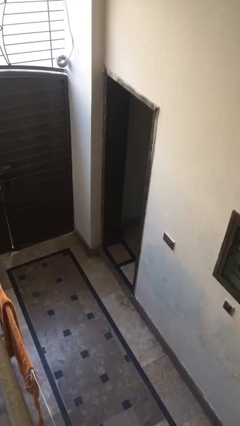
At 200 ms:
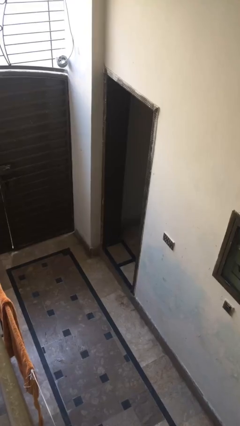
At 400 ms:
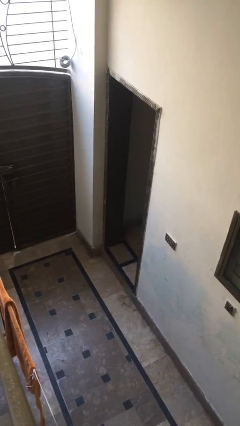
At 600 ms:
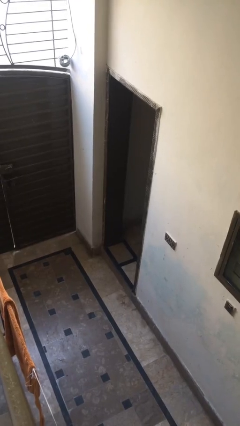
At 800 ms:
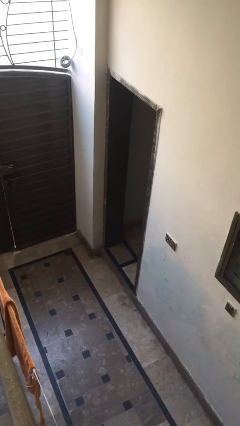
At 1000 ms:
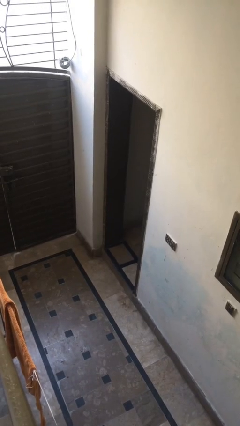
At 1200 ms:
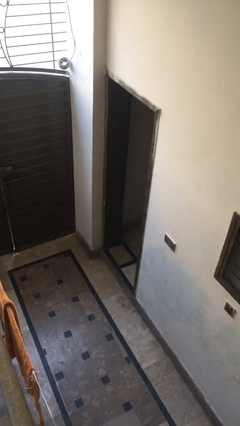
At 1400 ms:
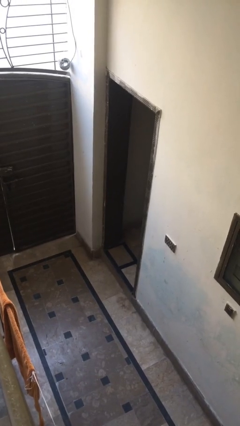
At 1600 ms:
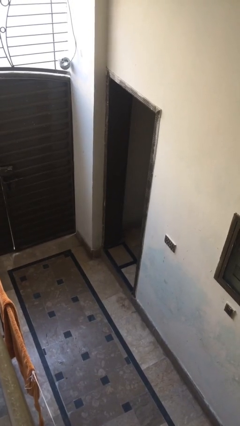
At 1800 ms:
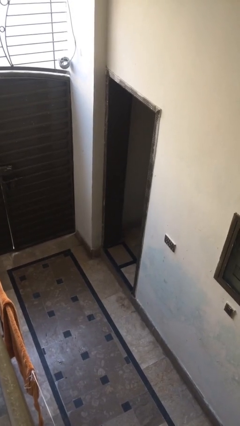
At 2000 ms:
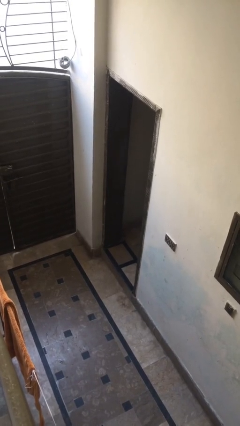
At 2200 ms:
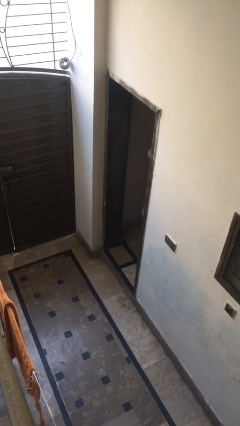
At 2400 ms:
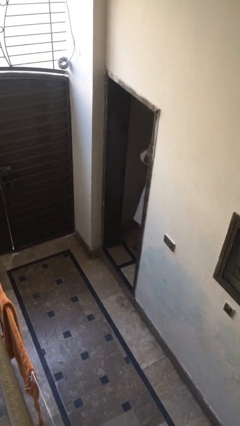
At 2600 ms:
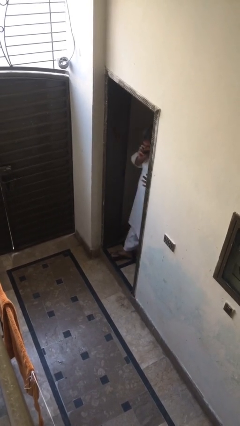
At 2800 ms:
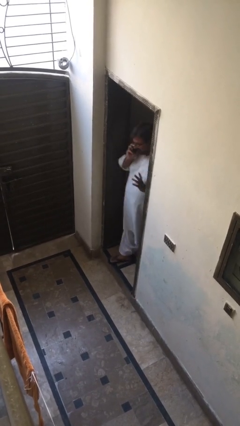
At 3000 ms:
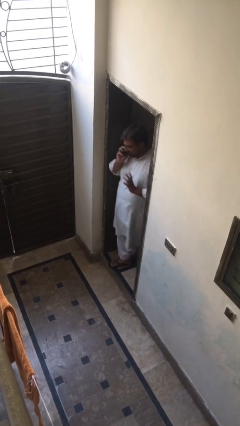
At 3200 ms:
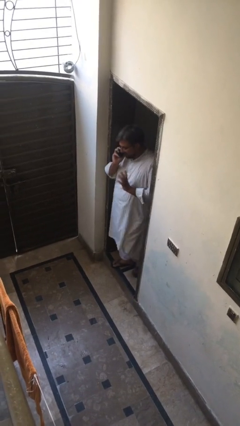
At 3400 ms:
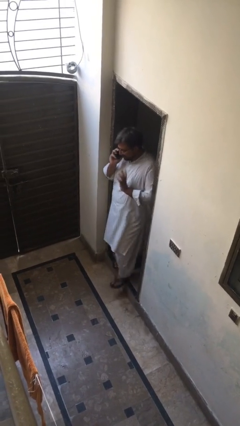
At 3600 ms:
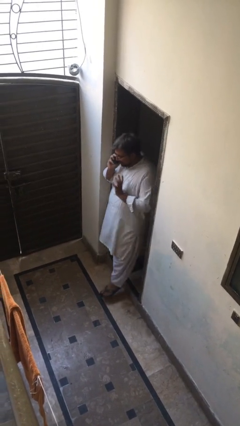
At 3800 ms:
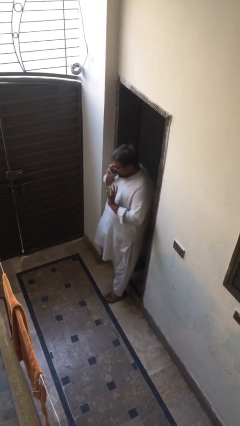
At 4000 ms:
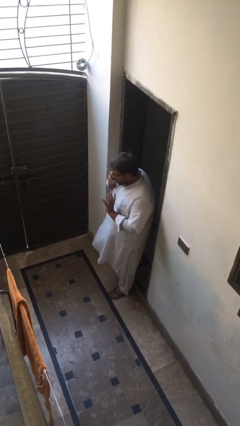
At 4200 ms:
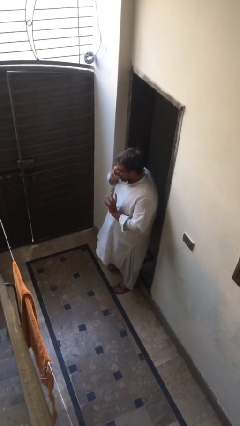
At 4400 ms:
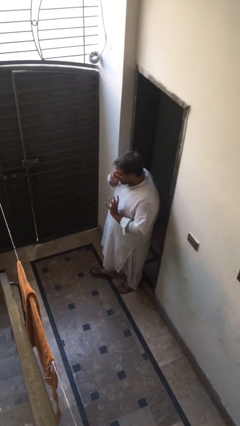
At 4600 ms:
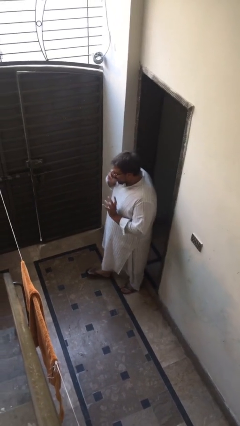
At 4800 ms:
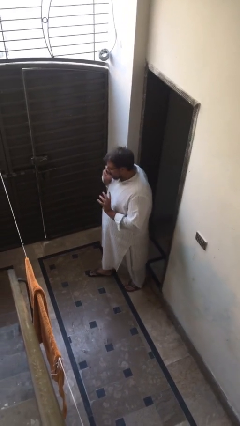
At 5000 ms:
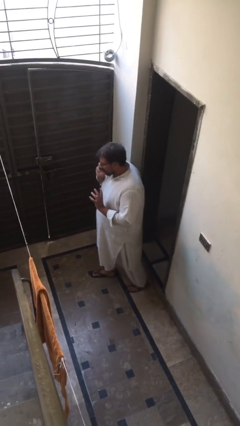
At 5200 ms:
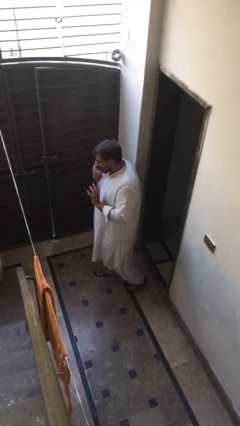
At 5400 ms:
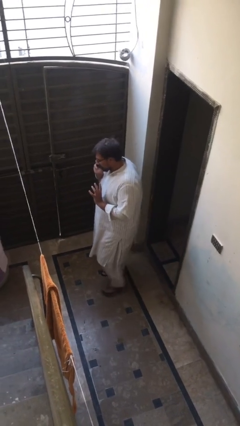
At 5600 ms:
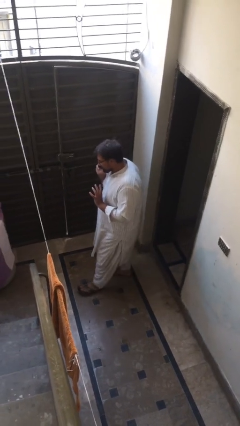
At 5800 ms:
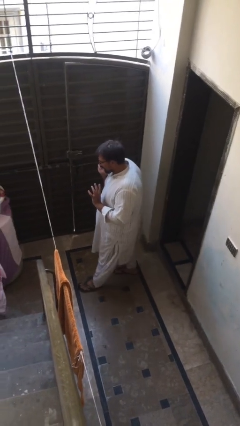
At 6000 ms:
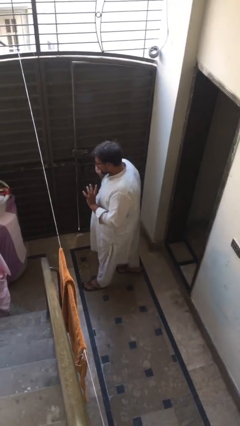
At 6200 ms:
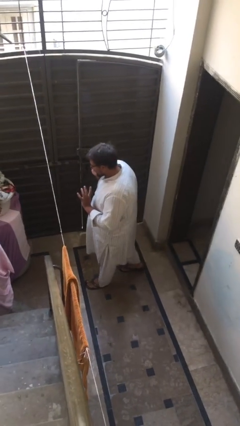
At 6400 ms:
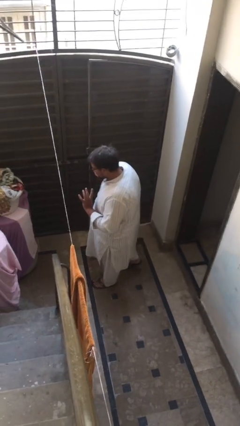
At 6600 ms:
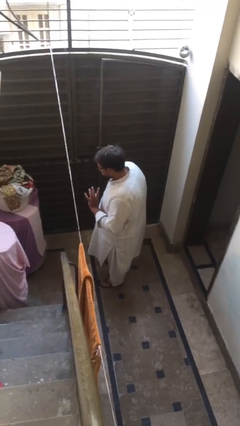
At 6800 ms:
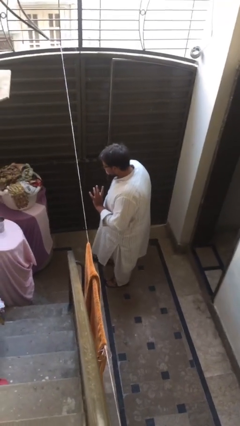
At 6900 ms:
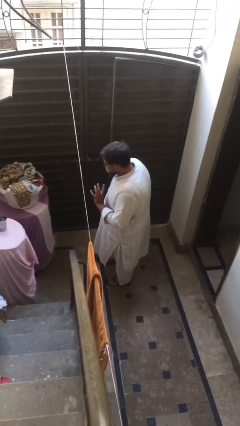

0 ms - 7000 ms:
person enters scene through structure

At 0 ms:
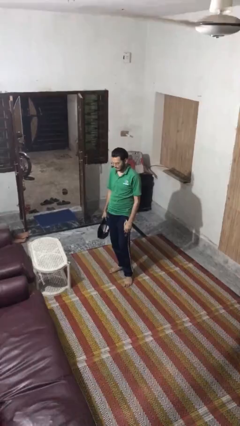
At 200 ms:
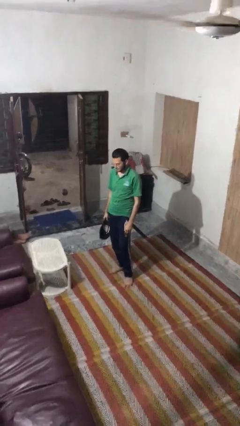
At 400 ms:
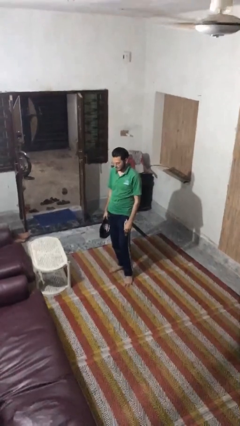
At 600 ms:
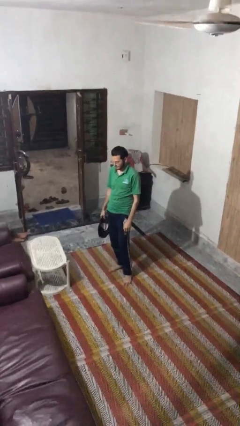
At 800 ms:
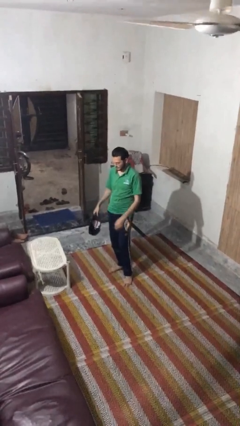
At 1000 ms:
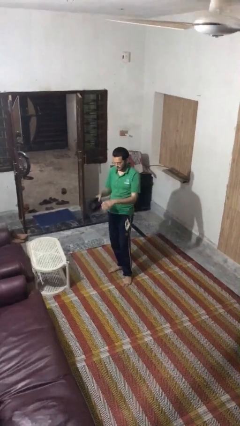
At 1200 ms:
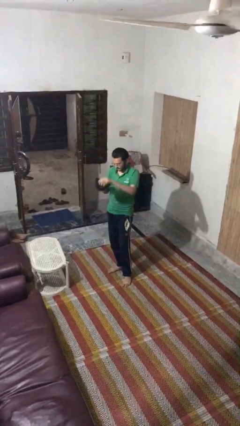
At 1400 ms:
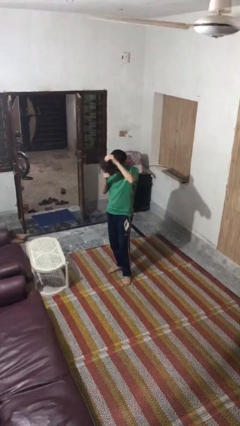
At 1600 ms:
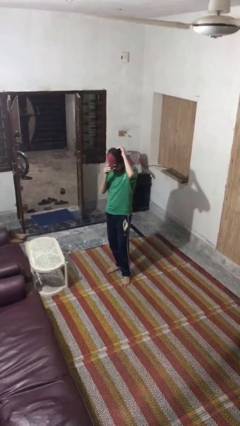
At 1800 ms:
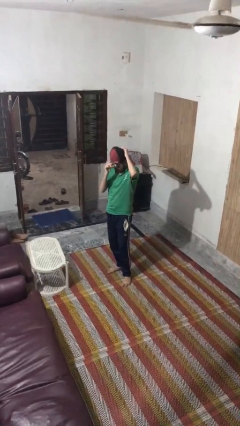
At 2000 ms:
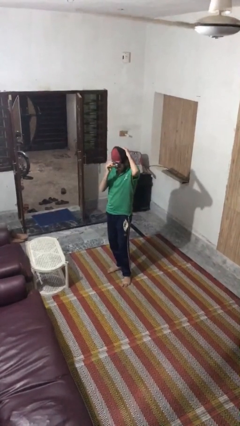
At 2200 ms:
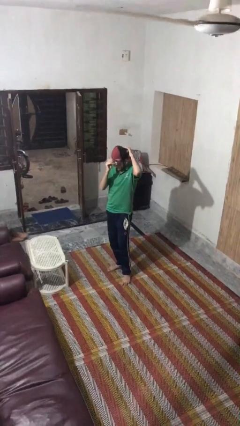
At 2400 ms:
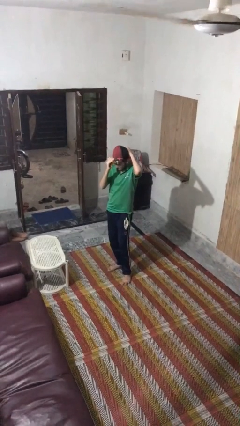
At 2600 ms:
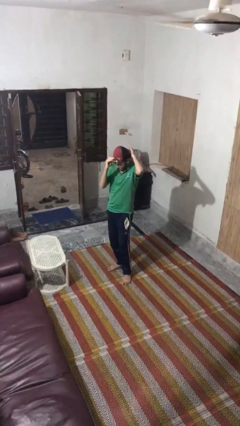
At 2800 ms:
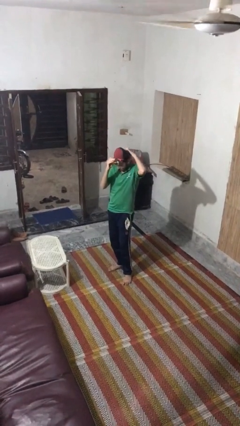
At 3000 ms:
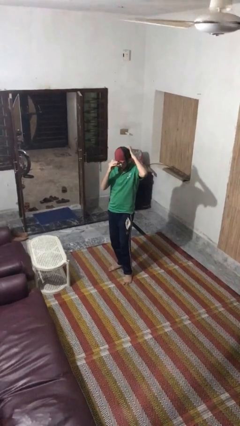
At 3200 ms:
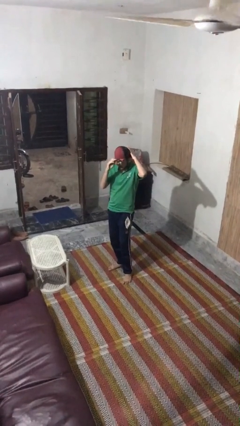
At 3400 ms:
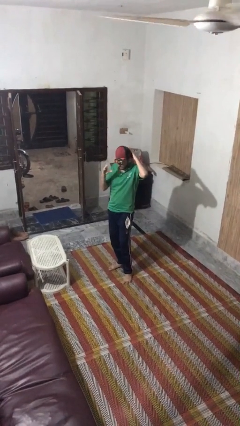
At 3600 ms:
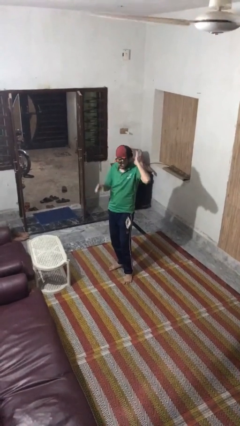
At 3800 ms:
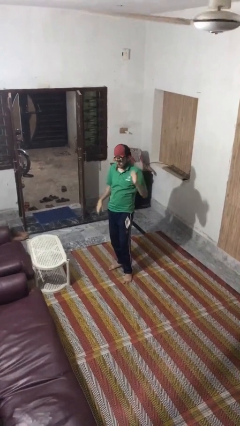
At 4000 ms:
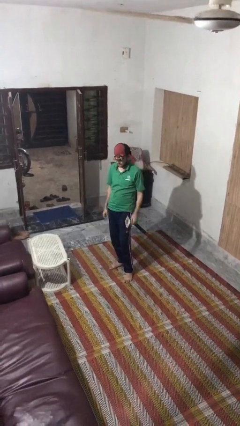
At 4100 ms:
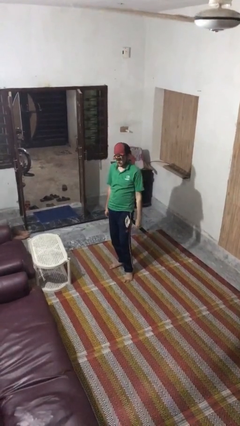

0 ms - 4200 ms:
person puts on hat

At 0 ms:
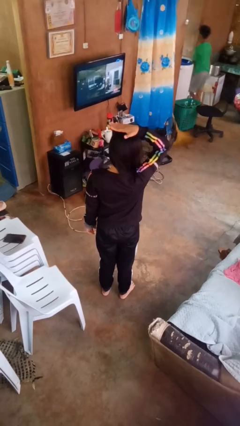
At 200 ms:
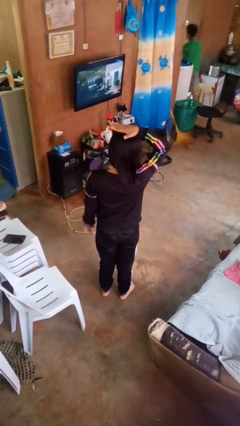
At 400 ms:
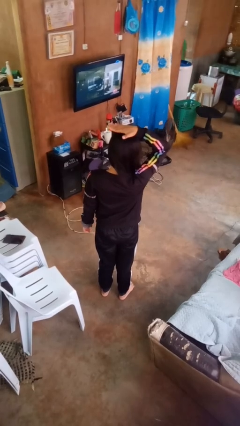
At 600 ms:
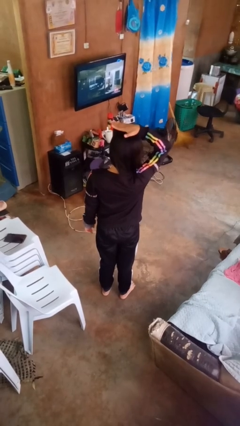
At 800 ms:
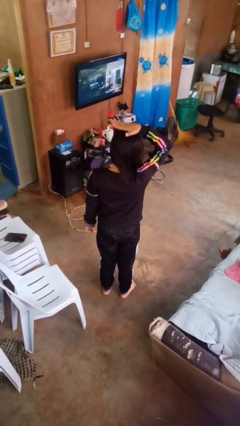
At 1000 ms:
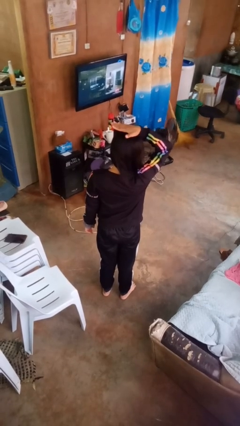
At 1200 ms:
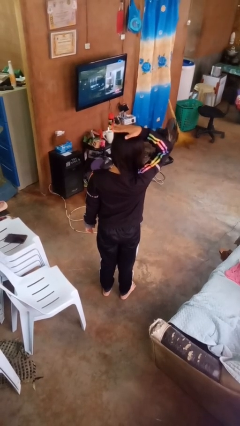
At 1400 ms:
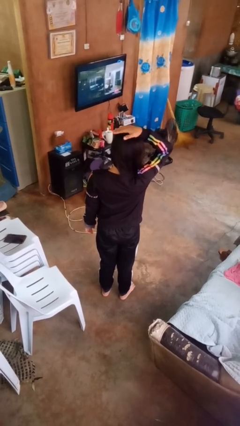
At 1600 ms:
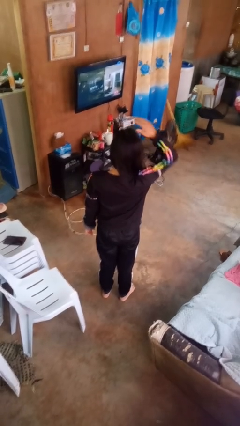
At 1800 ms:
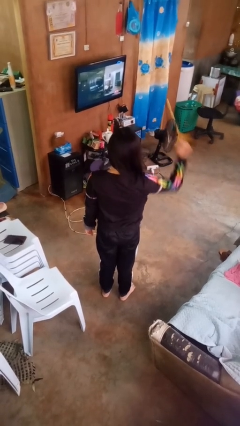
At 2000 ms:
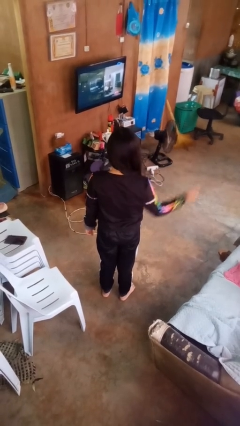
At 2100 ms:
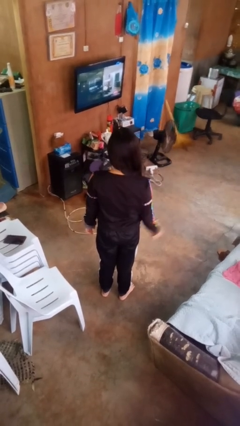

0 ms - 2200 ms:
person pats head

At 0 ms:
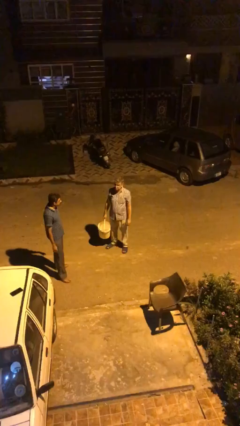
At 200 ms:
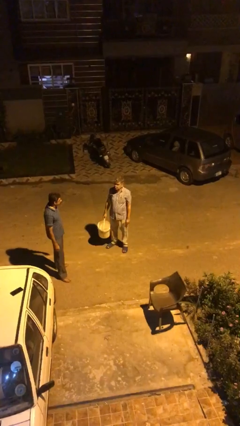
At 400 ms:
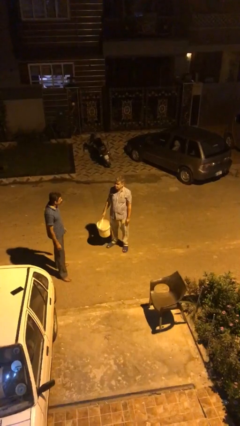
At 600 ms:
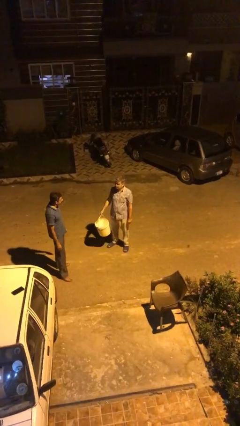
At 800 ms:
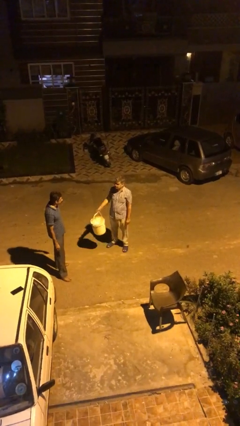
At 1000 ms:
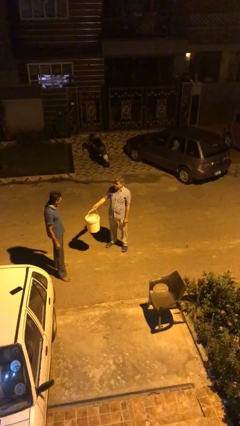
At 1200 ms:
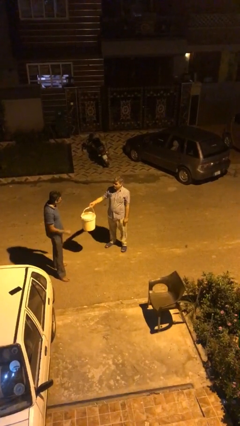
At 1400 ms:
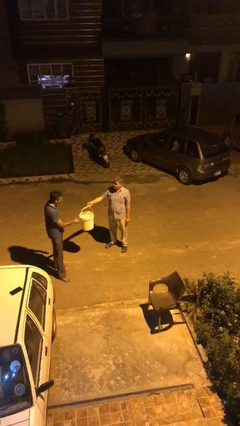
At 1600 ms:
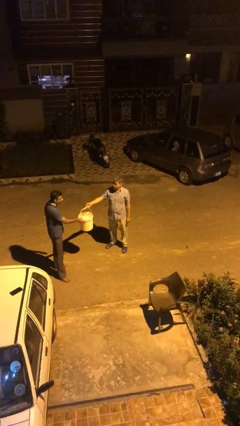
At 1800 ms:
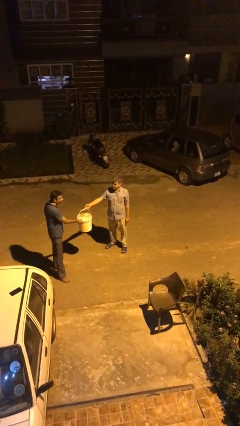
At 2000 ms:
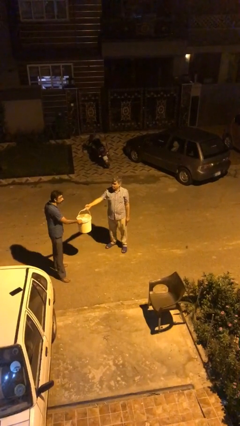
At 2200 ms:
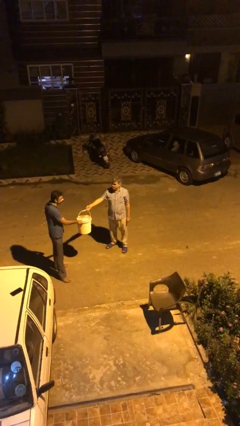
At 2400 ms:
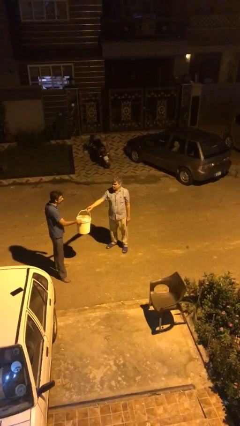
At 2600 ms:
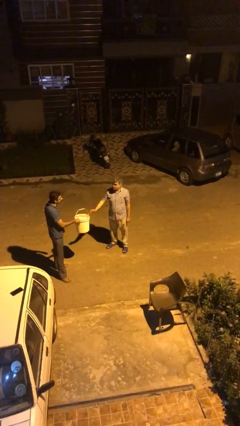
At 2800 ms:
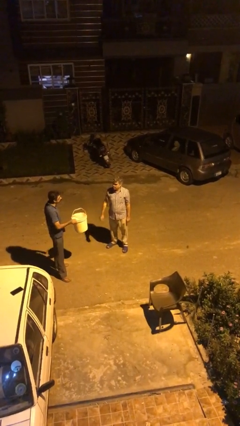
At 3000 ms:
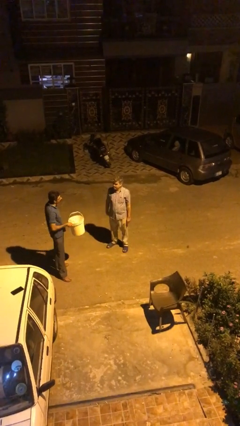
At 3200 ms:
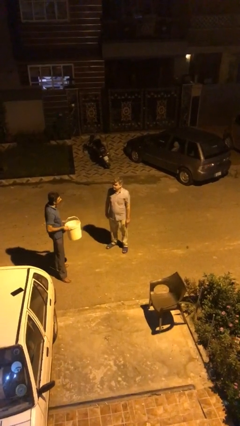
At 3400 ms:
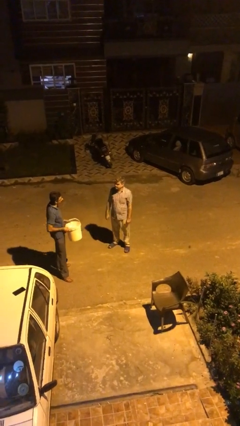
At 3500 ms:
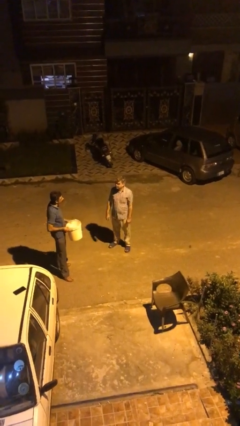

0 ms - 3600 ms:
person transfers object to person

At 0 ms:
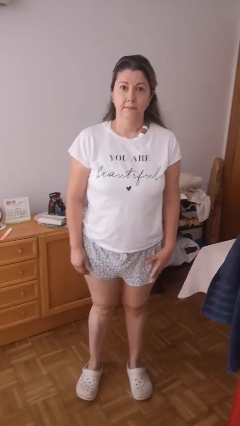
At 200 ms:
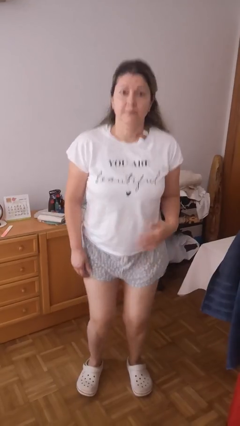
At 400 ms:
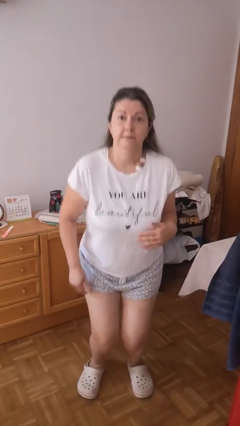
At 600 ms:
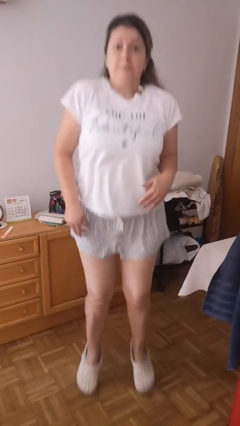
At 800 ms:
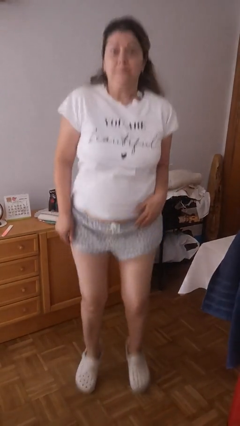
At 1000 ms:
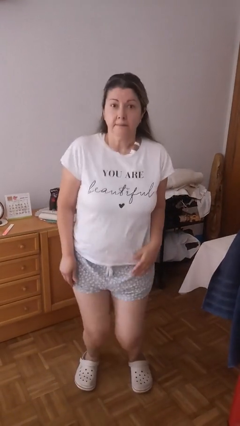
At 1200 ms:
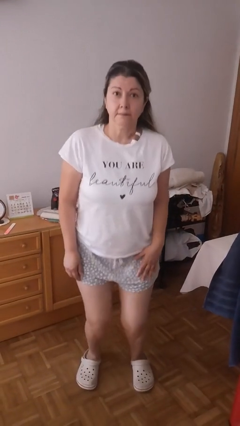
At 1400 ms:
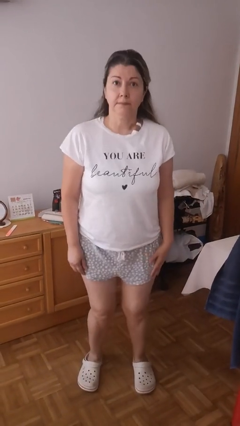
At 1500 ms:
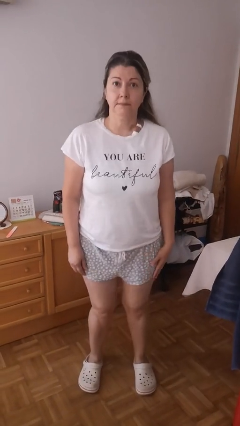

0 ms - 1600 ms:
person jumps
